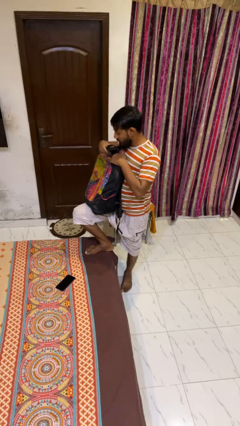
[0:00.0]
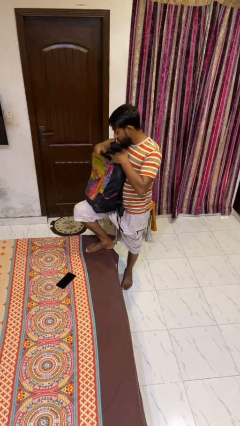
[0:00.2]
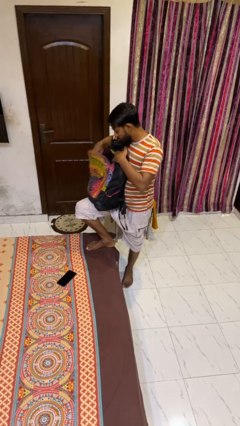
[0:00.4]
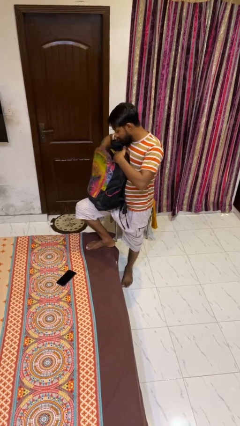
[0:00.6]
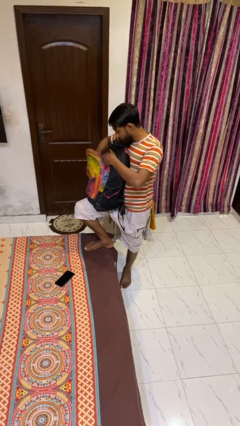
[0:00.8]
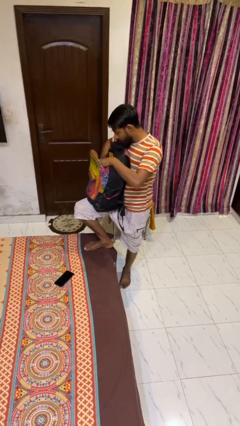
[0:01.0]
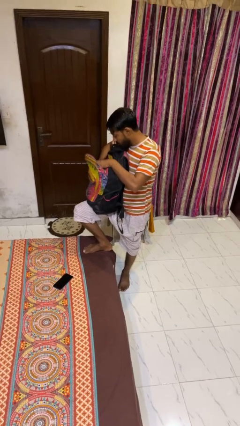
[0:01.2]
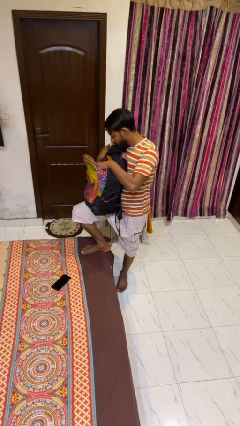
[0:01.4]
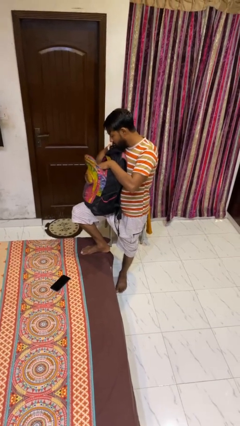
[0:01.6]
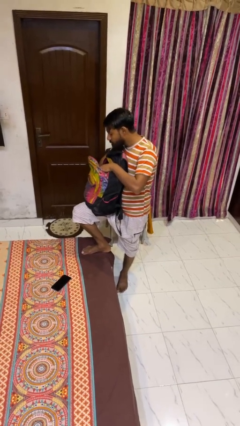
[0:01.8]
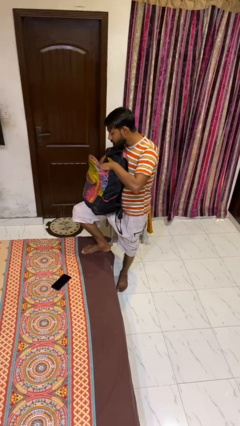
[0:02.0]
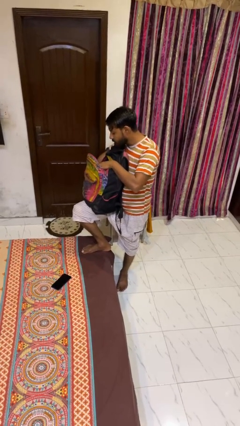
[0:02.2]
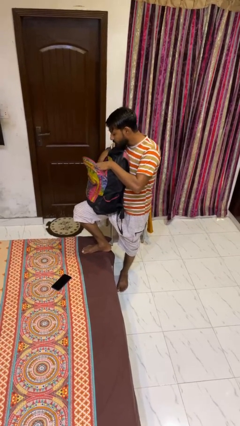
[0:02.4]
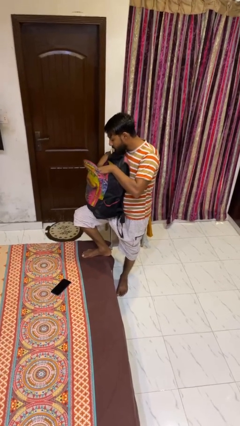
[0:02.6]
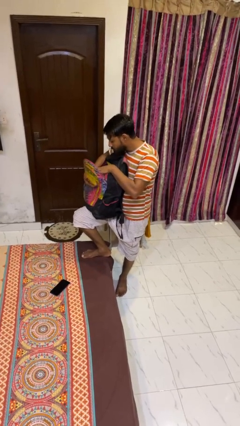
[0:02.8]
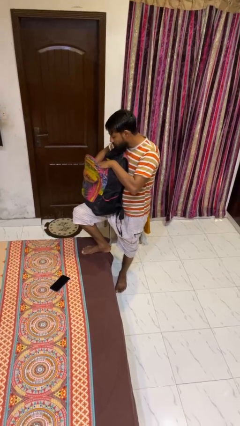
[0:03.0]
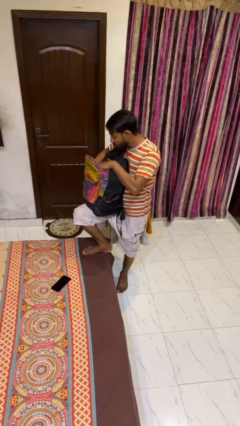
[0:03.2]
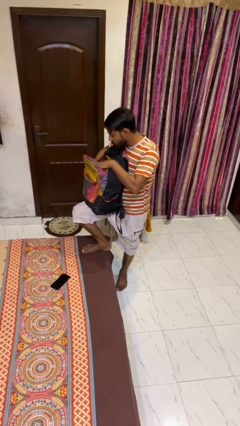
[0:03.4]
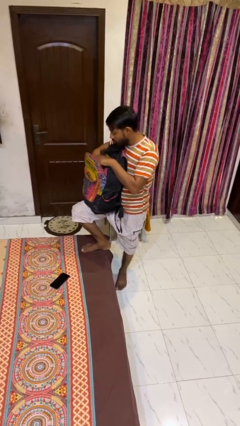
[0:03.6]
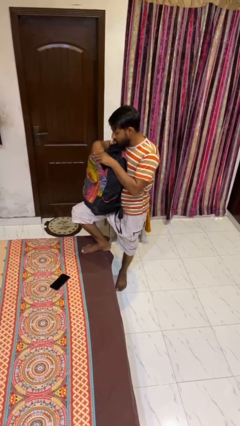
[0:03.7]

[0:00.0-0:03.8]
person searches in backpack

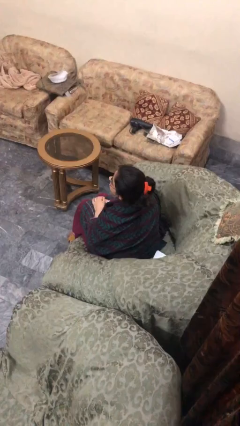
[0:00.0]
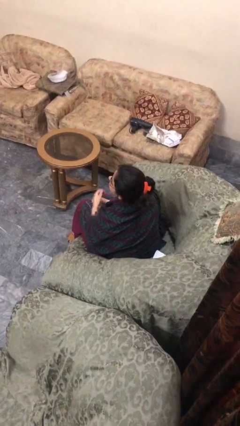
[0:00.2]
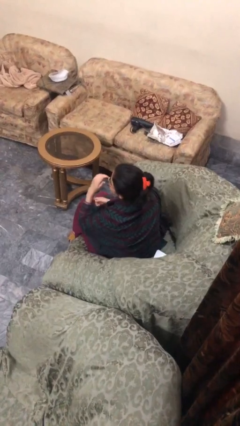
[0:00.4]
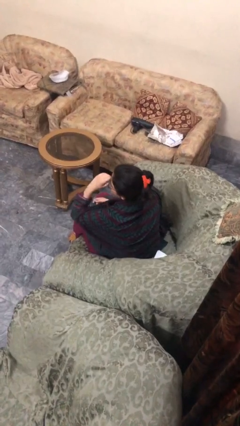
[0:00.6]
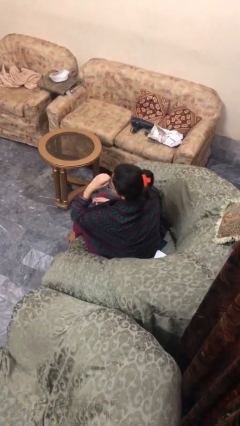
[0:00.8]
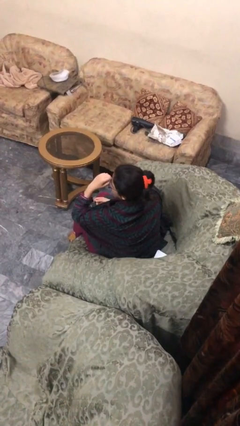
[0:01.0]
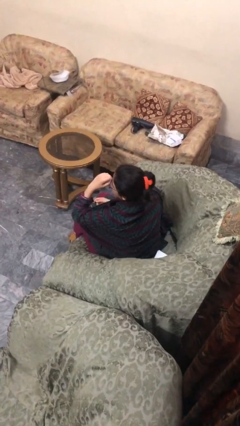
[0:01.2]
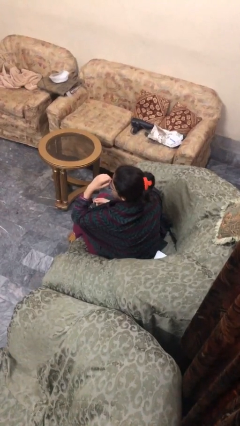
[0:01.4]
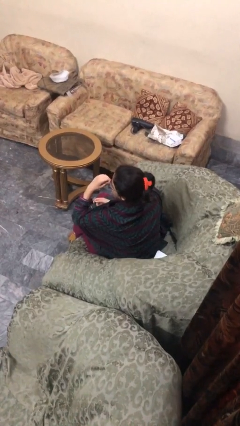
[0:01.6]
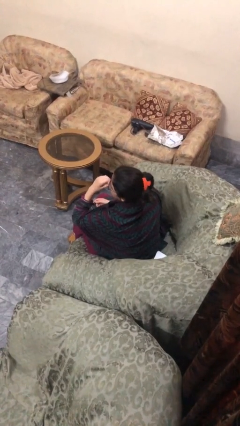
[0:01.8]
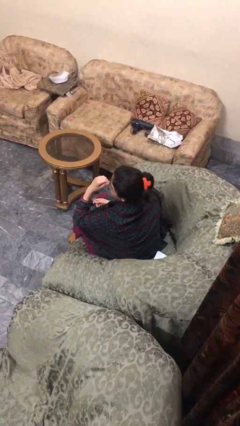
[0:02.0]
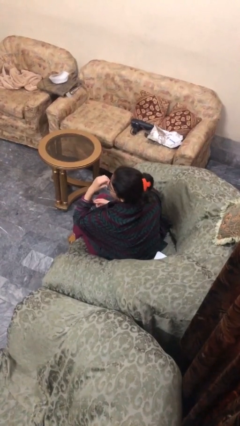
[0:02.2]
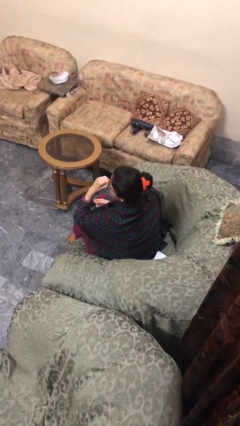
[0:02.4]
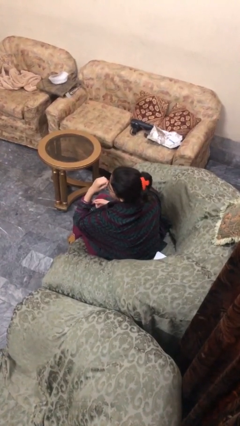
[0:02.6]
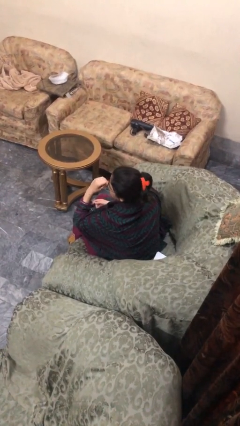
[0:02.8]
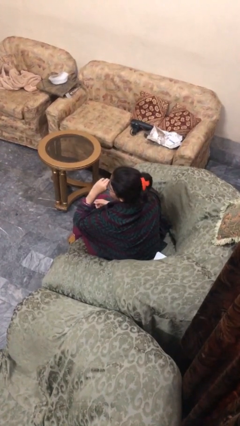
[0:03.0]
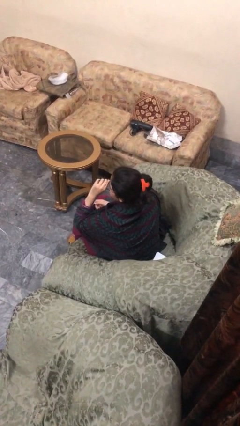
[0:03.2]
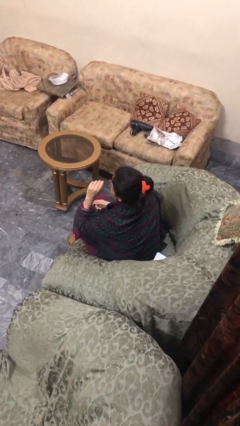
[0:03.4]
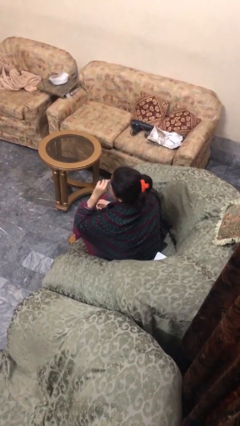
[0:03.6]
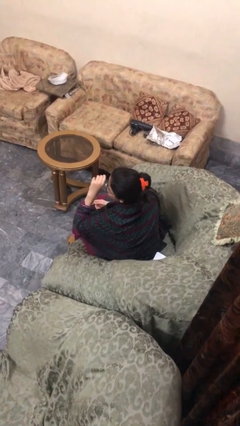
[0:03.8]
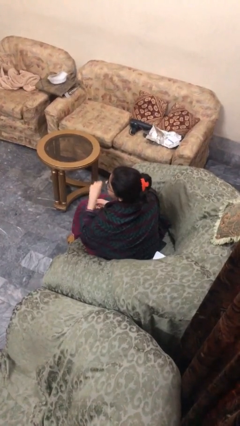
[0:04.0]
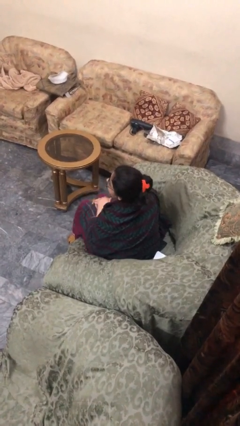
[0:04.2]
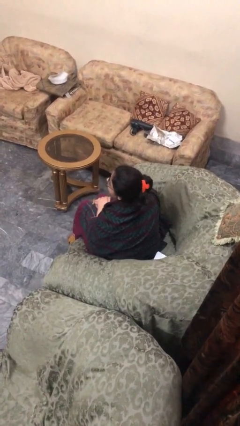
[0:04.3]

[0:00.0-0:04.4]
person blows nose

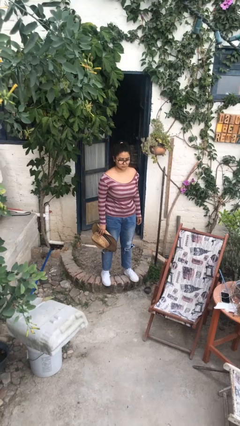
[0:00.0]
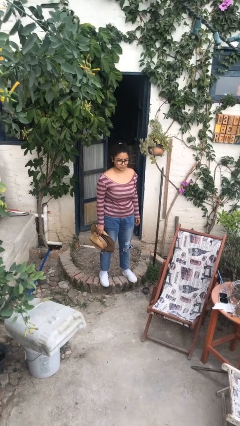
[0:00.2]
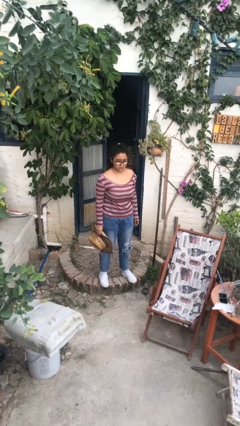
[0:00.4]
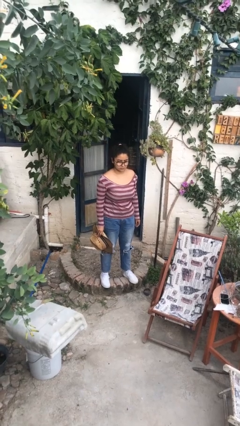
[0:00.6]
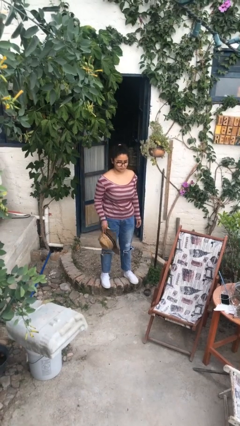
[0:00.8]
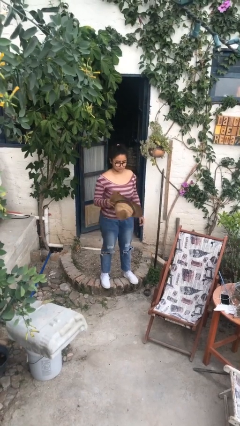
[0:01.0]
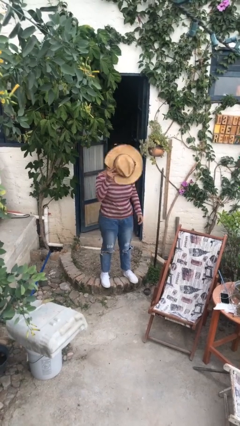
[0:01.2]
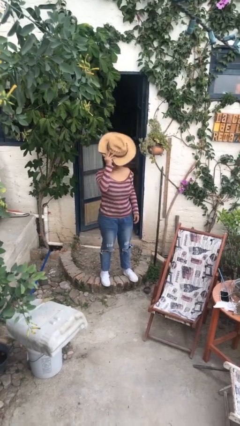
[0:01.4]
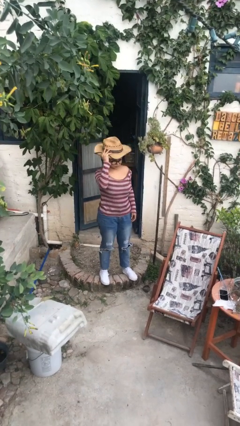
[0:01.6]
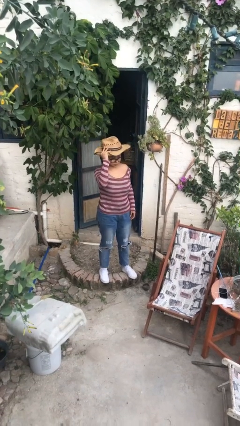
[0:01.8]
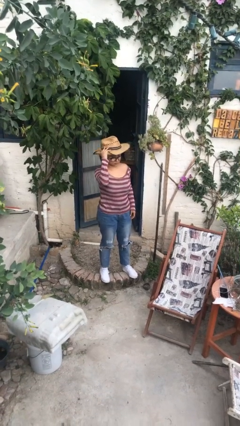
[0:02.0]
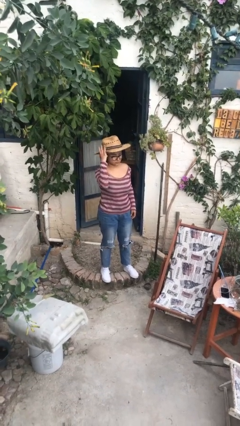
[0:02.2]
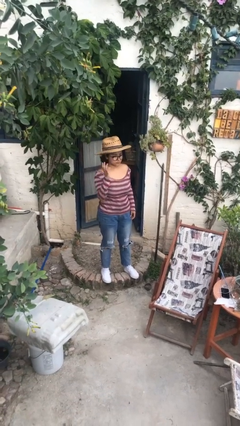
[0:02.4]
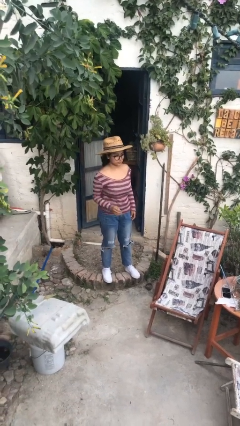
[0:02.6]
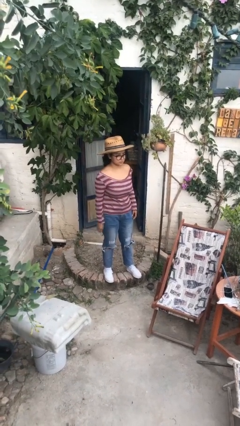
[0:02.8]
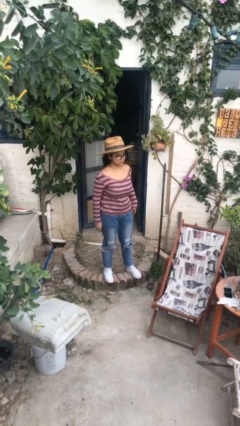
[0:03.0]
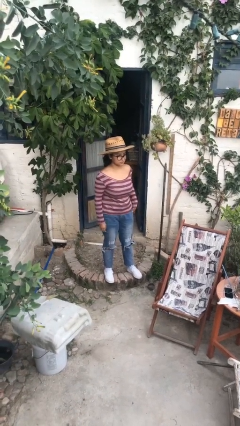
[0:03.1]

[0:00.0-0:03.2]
person puts on hat

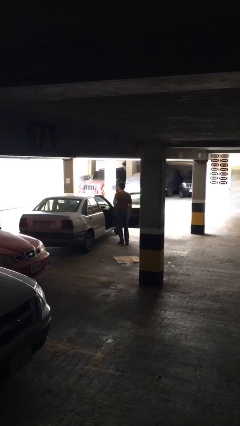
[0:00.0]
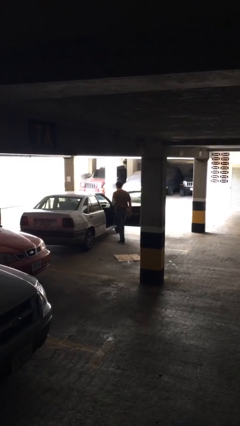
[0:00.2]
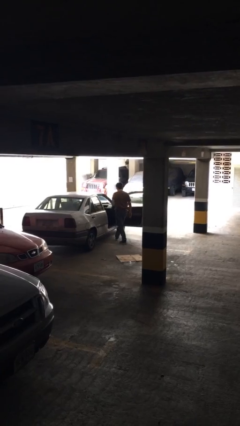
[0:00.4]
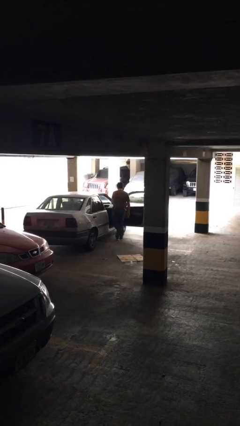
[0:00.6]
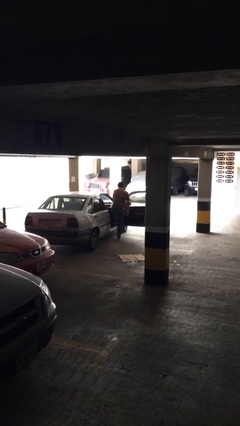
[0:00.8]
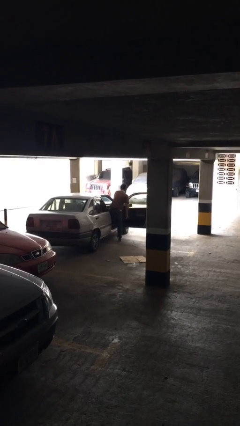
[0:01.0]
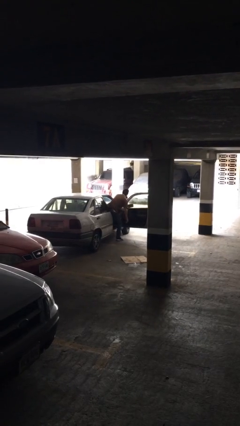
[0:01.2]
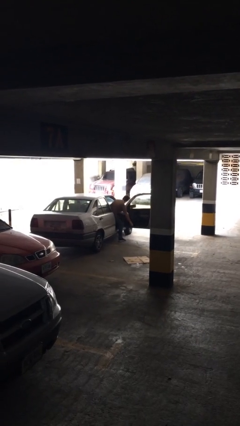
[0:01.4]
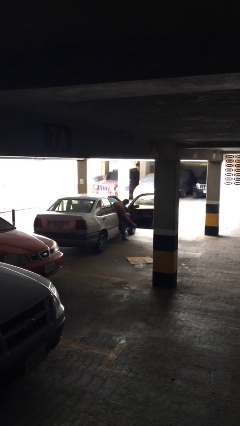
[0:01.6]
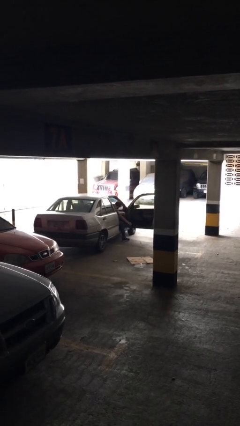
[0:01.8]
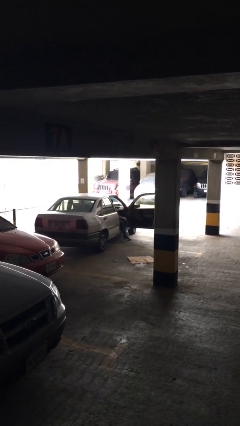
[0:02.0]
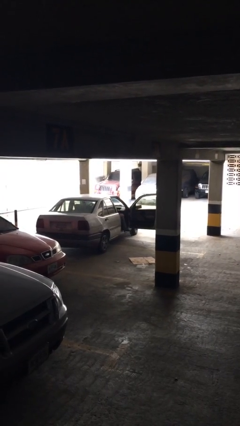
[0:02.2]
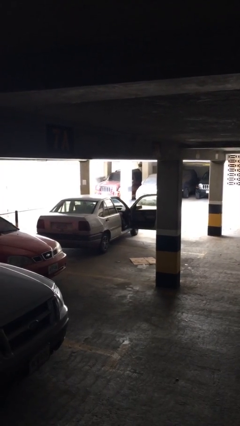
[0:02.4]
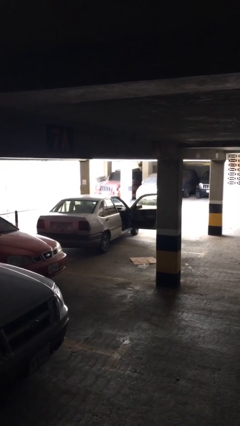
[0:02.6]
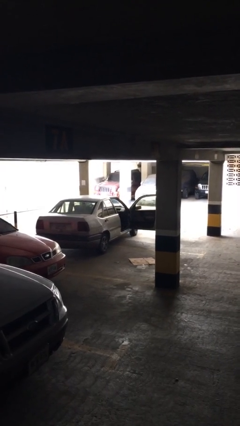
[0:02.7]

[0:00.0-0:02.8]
person enters car

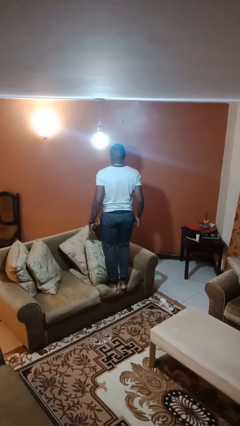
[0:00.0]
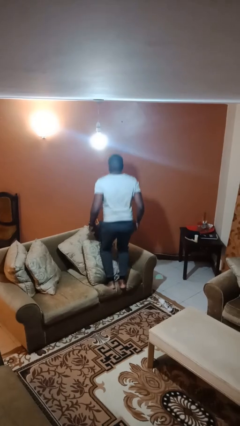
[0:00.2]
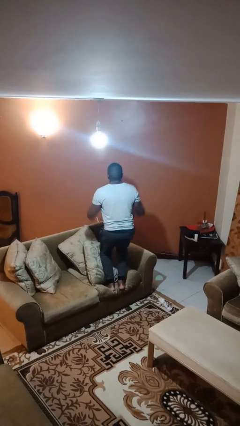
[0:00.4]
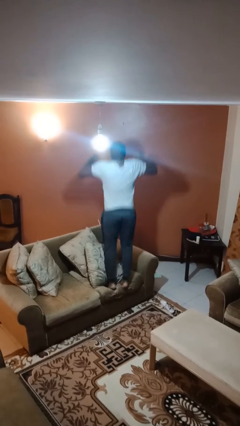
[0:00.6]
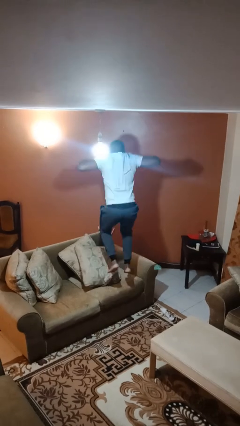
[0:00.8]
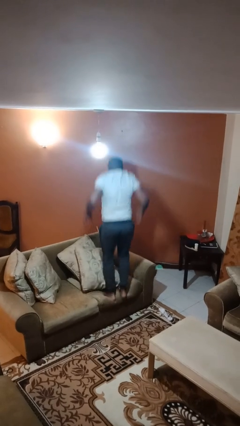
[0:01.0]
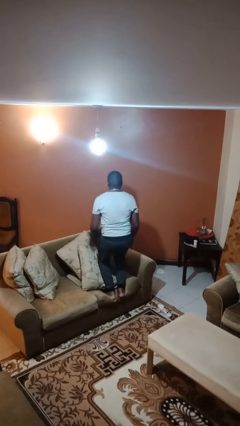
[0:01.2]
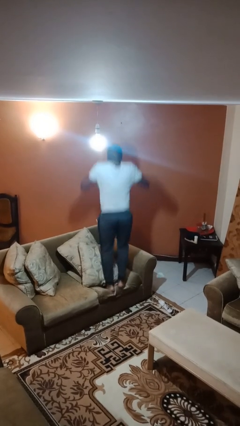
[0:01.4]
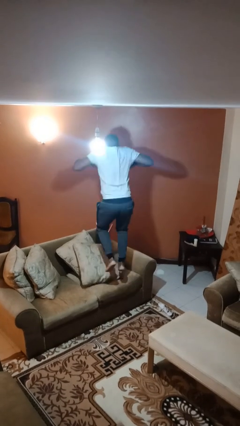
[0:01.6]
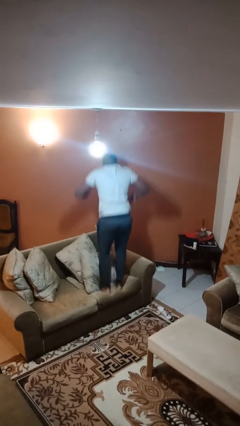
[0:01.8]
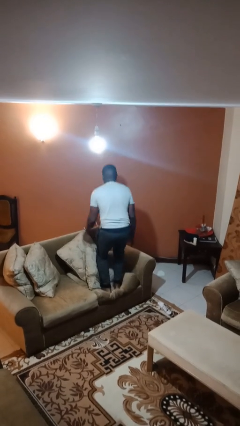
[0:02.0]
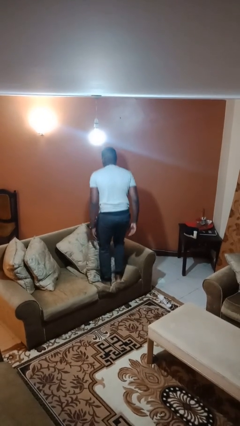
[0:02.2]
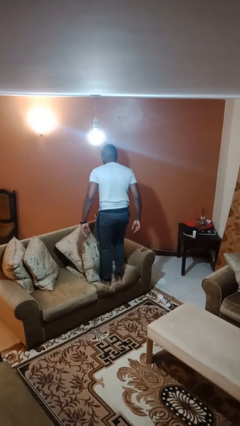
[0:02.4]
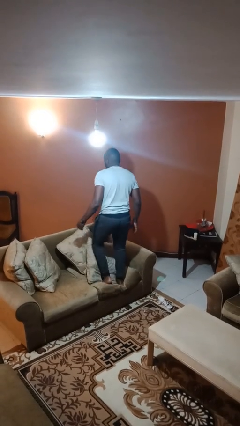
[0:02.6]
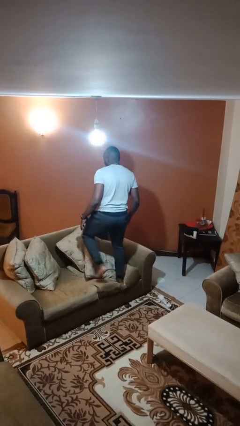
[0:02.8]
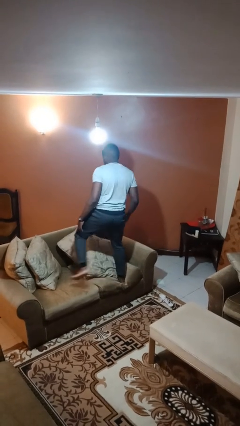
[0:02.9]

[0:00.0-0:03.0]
person jumps on couch
